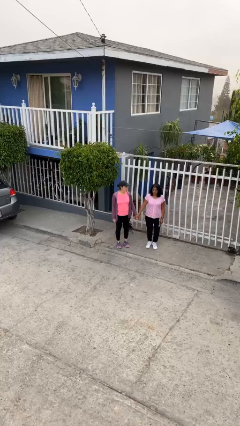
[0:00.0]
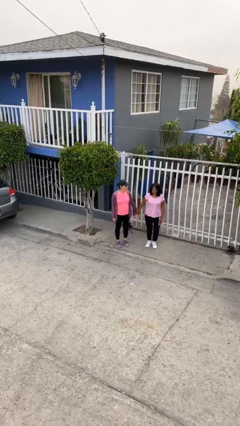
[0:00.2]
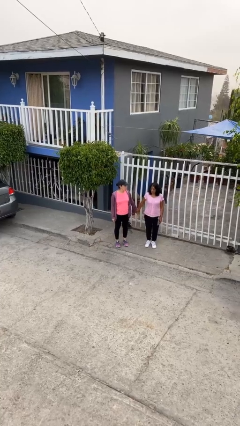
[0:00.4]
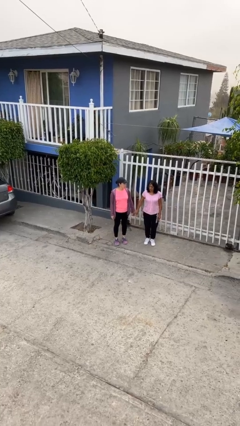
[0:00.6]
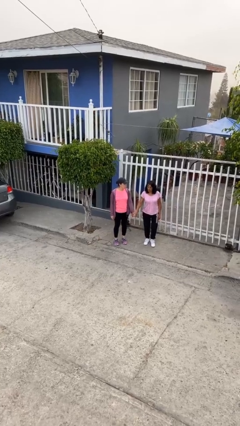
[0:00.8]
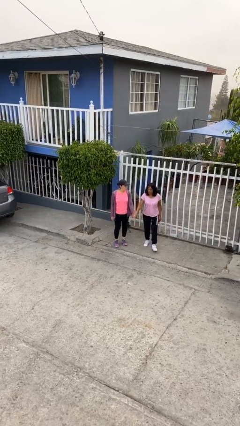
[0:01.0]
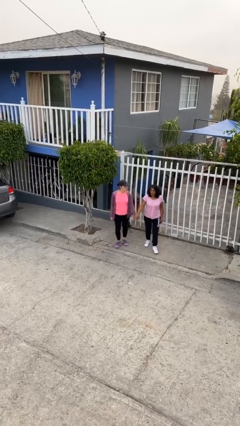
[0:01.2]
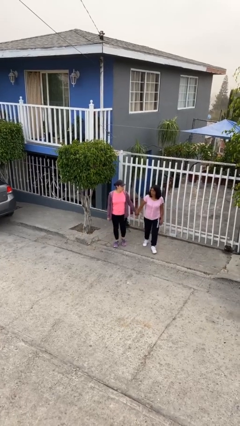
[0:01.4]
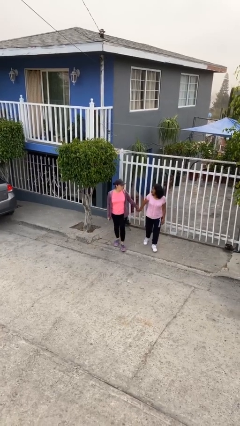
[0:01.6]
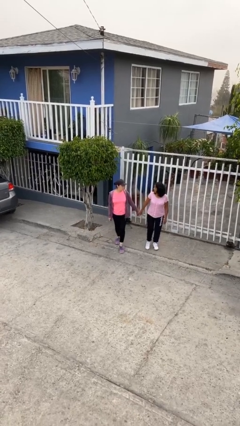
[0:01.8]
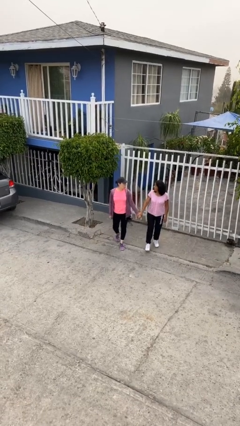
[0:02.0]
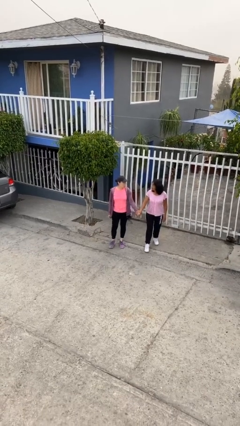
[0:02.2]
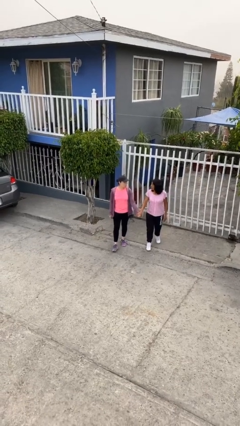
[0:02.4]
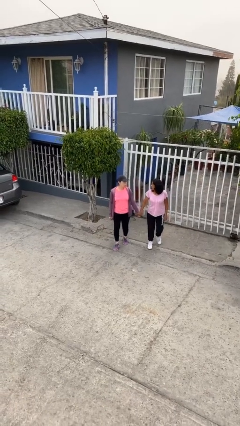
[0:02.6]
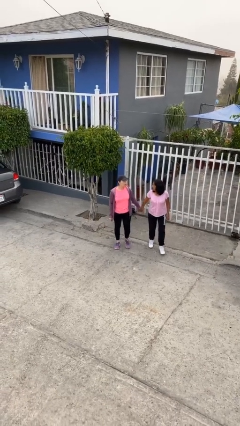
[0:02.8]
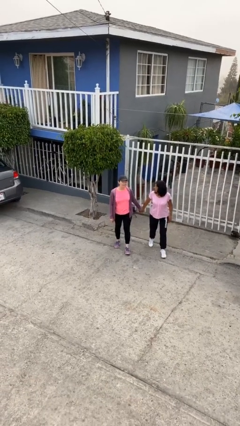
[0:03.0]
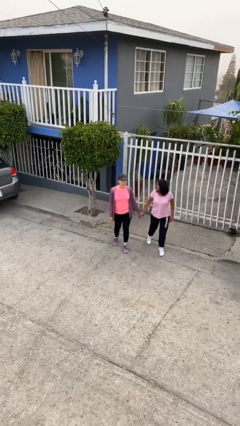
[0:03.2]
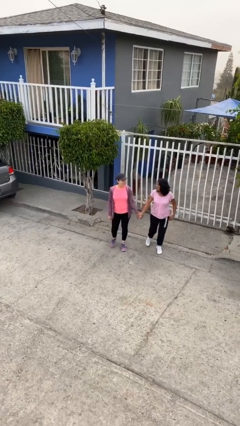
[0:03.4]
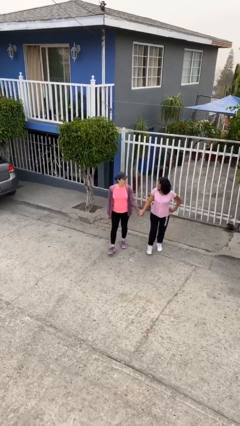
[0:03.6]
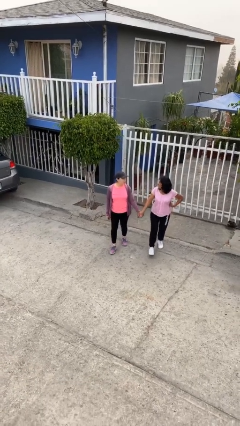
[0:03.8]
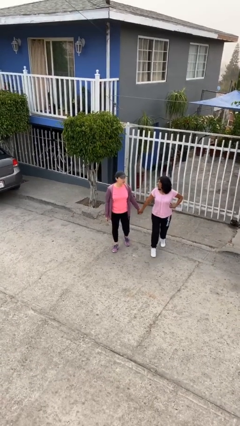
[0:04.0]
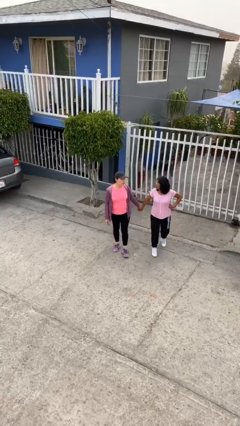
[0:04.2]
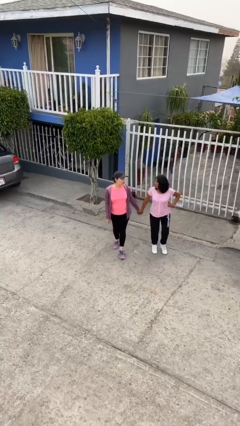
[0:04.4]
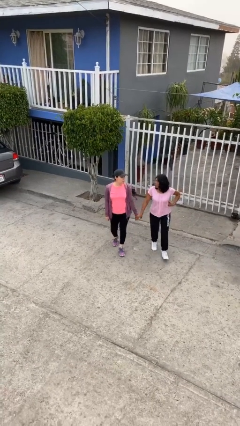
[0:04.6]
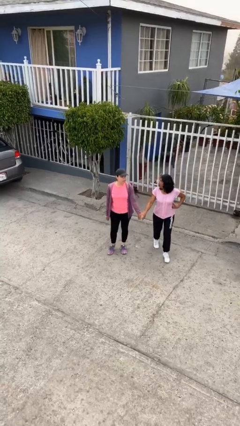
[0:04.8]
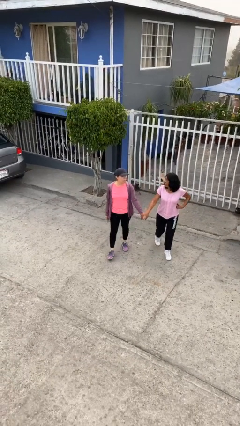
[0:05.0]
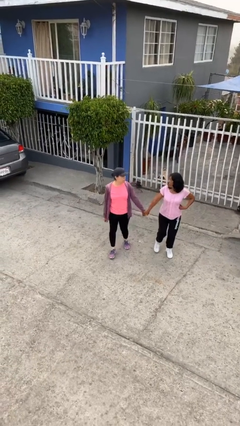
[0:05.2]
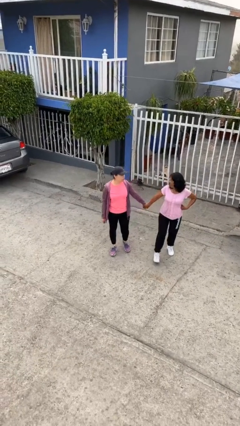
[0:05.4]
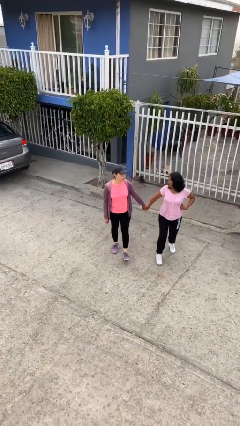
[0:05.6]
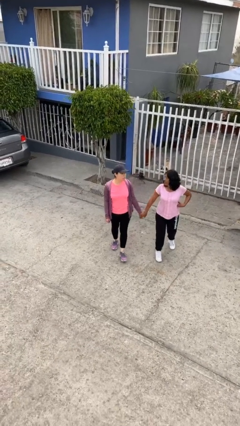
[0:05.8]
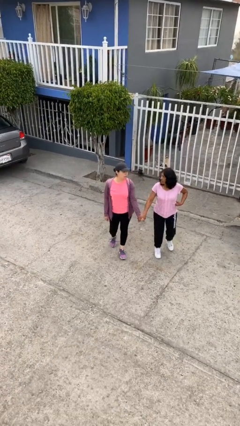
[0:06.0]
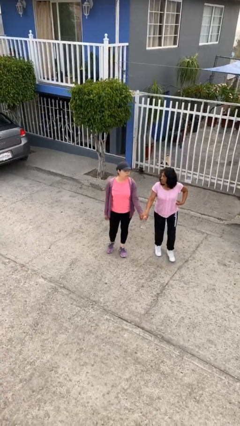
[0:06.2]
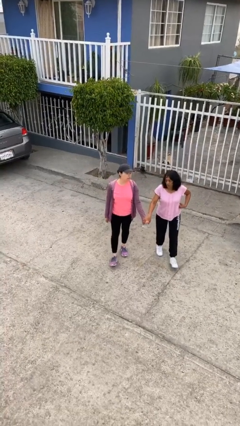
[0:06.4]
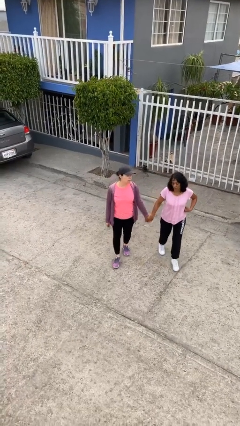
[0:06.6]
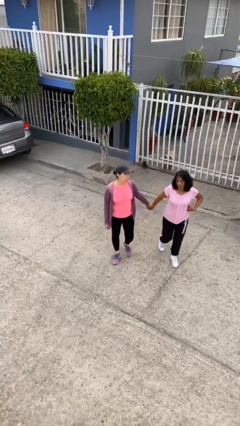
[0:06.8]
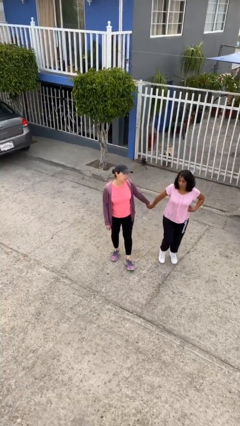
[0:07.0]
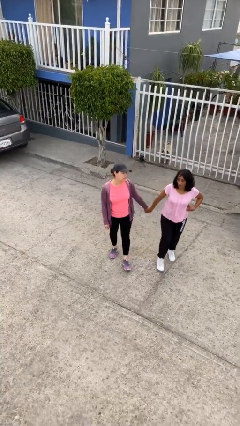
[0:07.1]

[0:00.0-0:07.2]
person holds hand

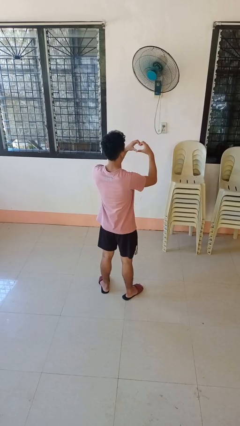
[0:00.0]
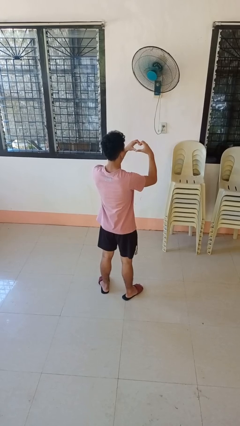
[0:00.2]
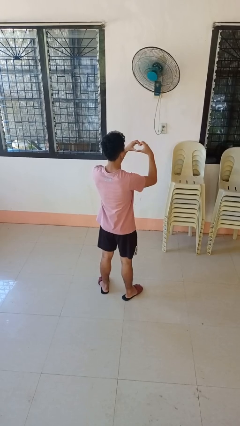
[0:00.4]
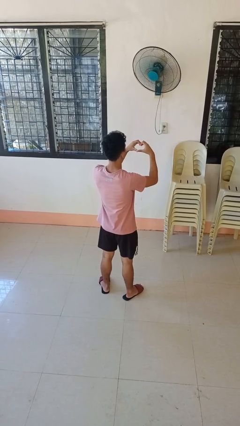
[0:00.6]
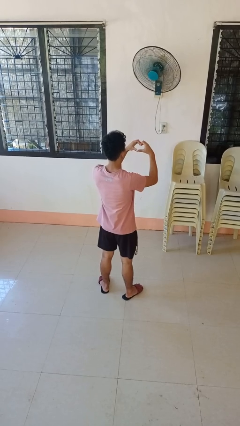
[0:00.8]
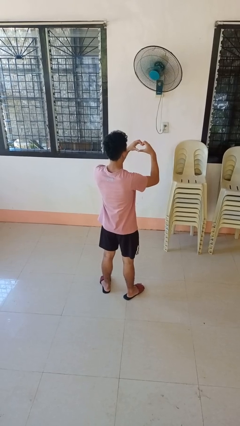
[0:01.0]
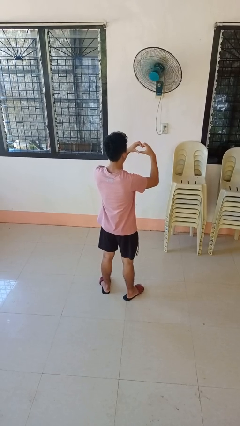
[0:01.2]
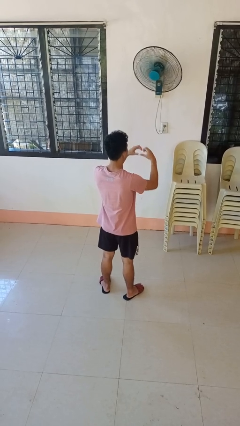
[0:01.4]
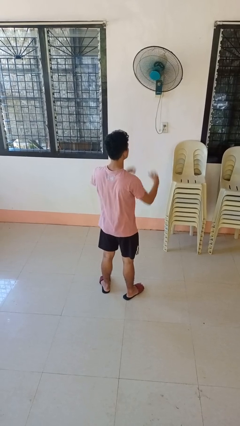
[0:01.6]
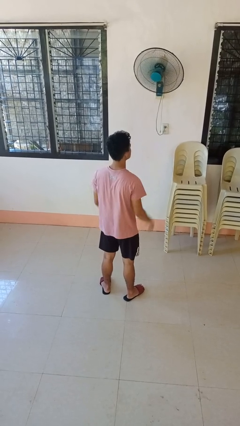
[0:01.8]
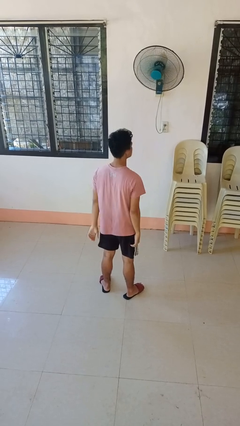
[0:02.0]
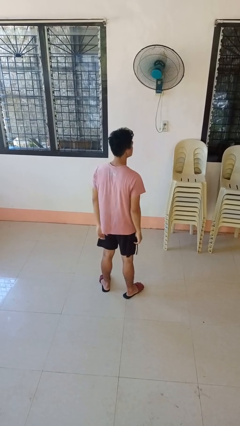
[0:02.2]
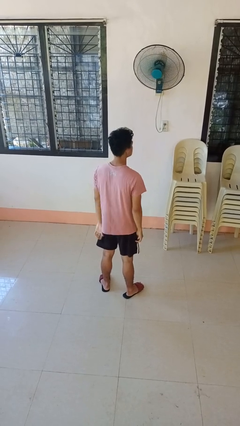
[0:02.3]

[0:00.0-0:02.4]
person gestures heart

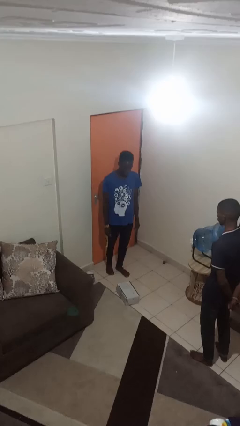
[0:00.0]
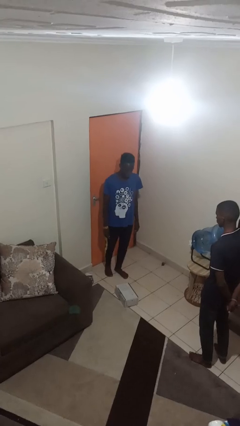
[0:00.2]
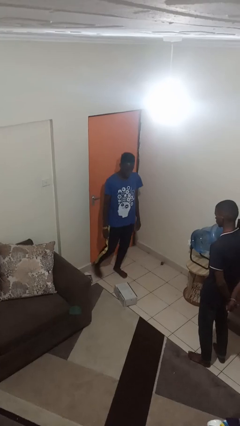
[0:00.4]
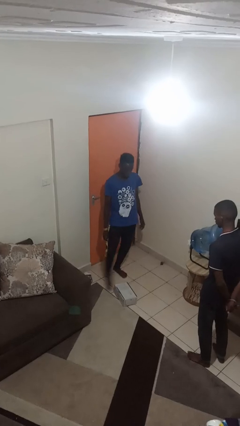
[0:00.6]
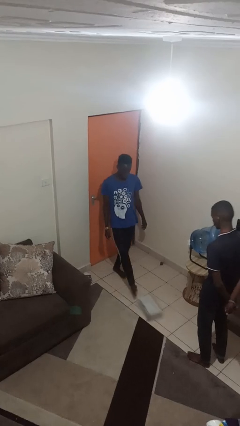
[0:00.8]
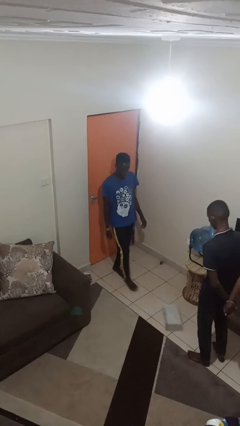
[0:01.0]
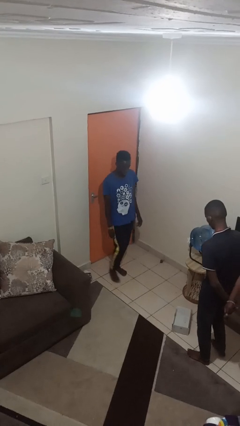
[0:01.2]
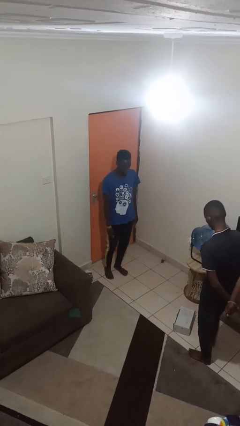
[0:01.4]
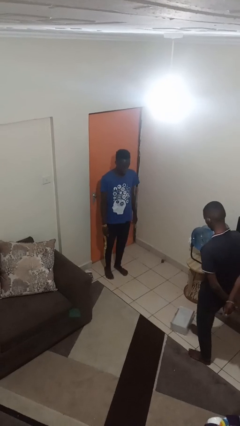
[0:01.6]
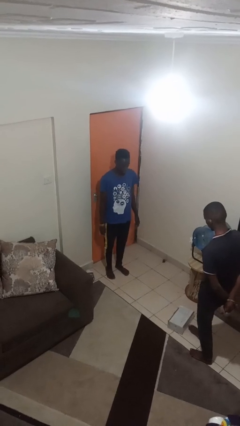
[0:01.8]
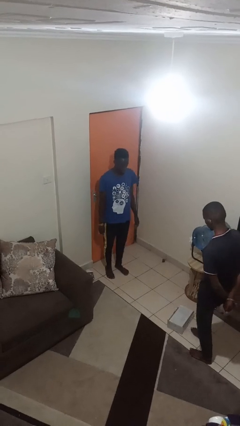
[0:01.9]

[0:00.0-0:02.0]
person kicks object to person

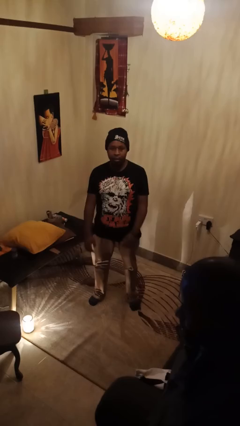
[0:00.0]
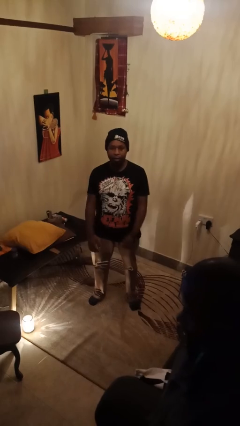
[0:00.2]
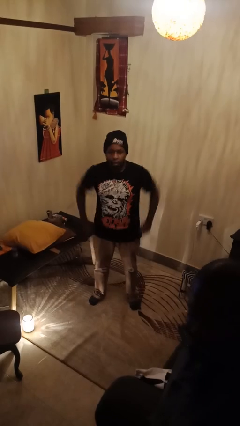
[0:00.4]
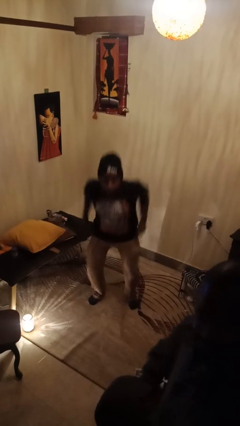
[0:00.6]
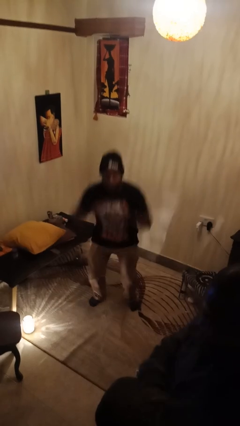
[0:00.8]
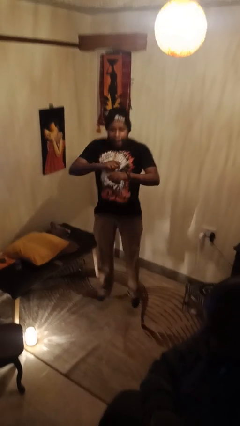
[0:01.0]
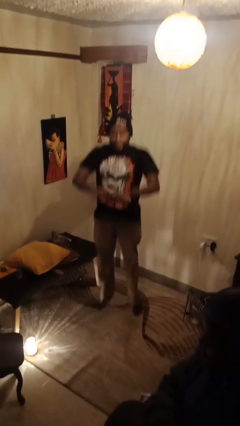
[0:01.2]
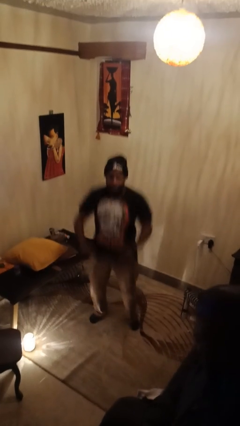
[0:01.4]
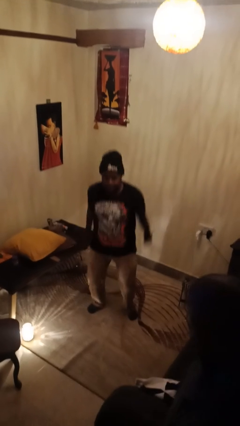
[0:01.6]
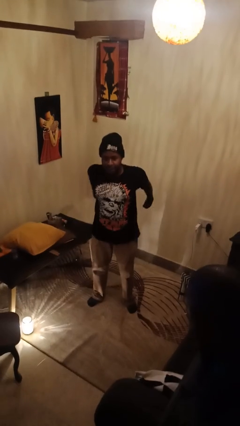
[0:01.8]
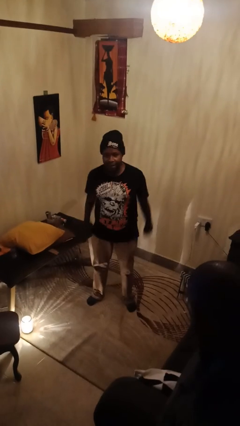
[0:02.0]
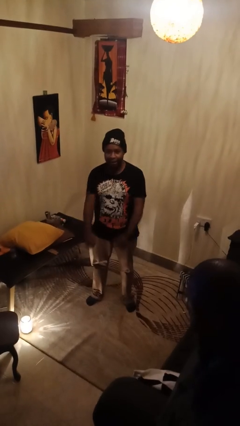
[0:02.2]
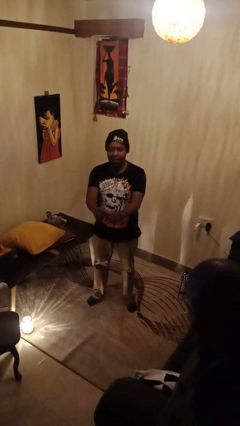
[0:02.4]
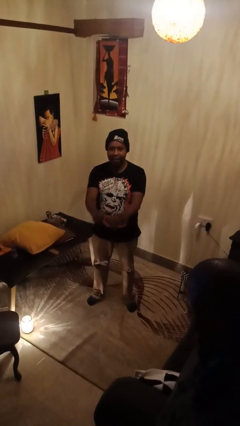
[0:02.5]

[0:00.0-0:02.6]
person jumps

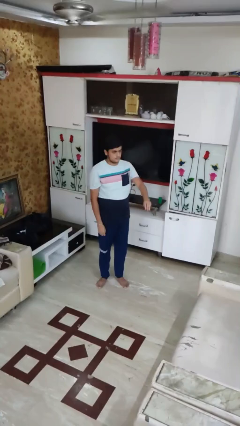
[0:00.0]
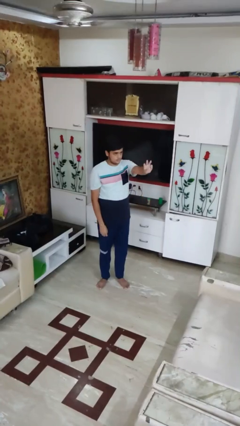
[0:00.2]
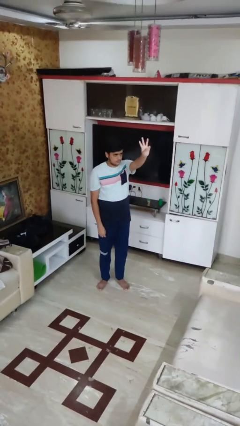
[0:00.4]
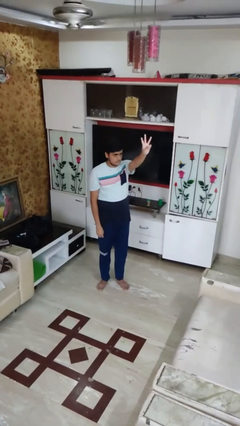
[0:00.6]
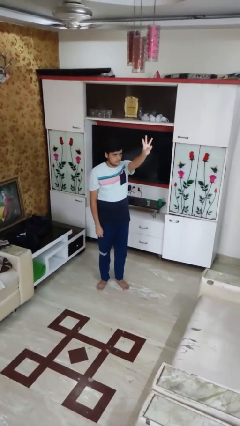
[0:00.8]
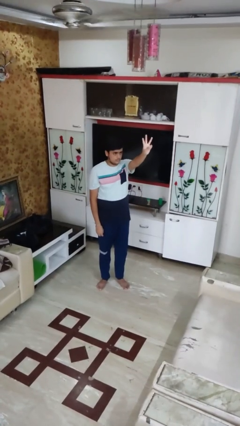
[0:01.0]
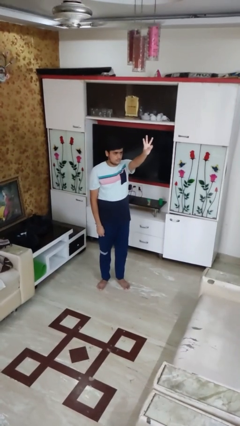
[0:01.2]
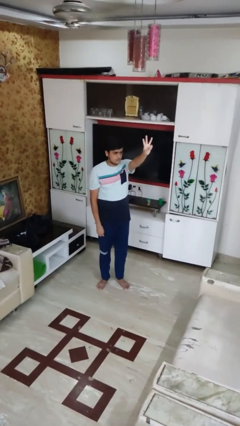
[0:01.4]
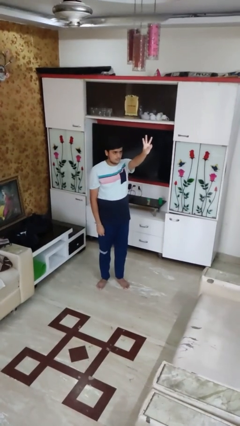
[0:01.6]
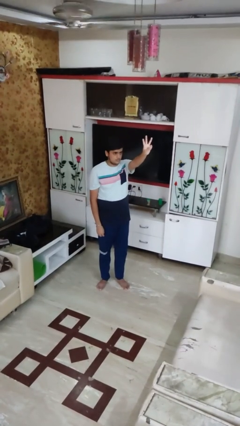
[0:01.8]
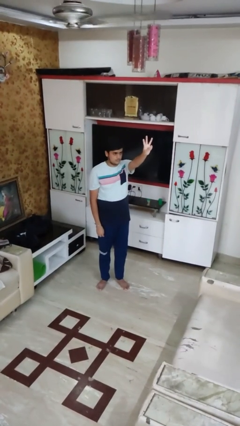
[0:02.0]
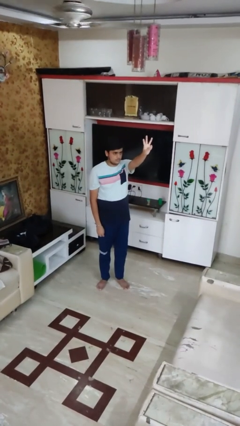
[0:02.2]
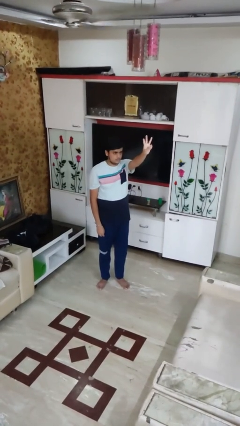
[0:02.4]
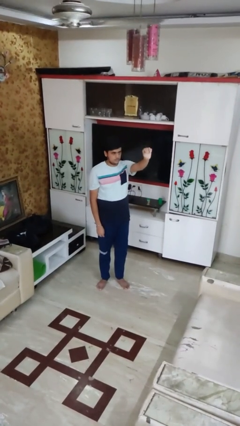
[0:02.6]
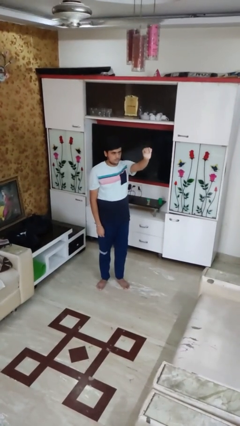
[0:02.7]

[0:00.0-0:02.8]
person gestures number three

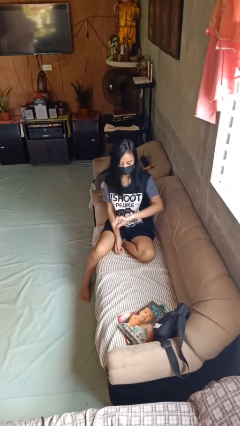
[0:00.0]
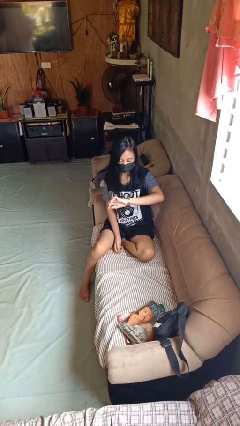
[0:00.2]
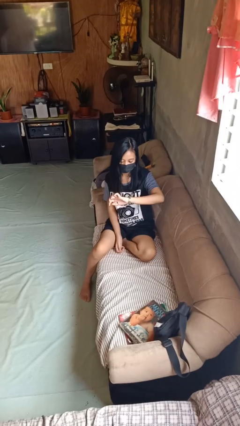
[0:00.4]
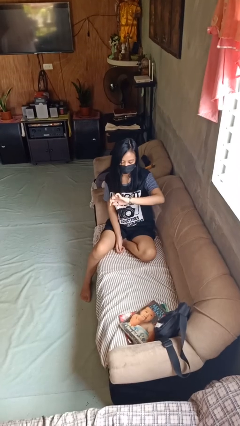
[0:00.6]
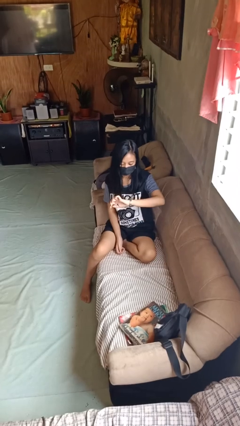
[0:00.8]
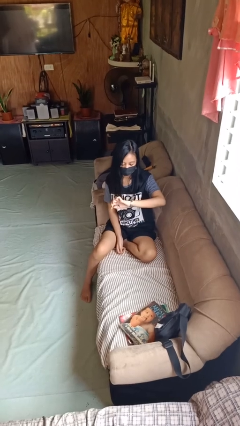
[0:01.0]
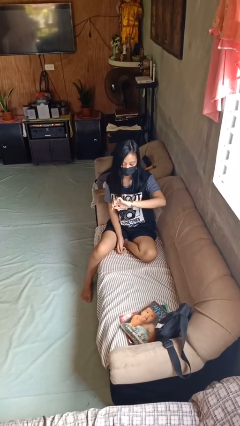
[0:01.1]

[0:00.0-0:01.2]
person looks at wristwatch
